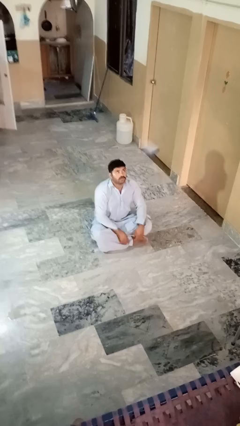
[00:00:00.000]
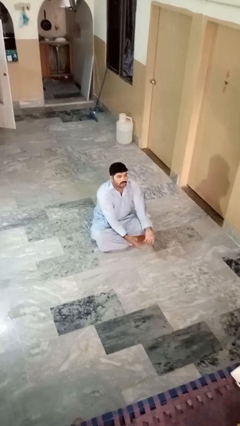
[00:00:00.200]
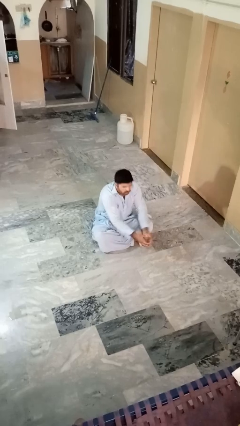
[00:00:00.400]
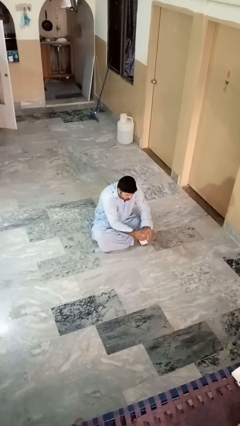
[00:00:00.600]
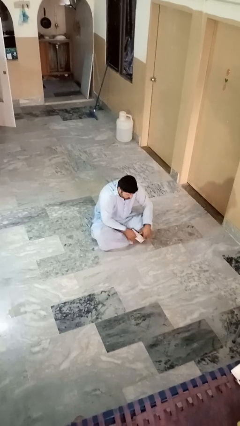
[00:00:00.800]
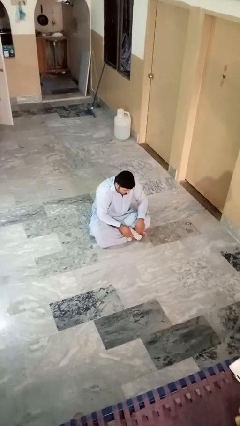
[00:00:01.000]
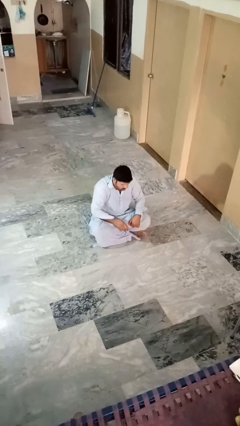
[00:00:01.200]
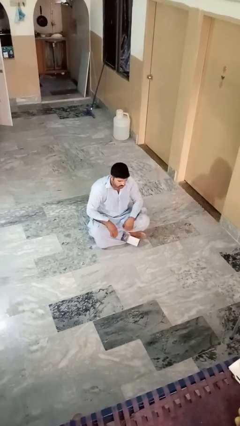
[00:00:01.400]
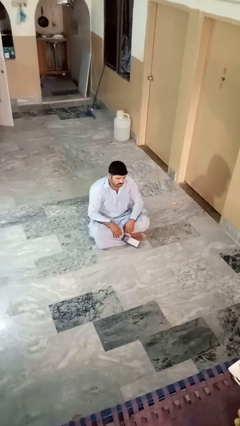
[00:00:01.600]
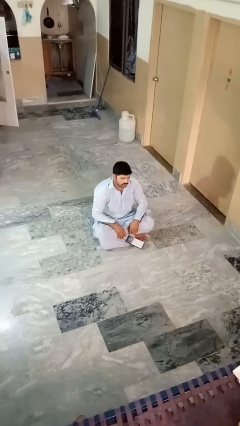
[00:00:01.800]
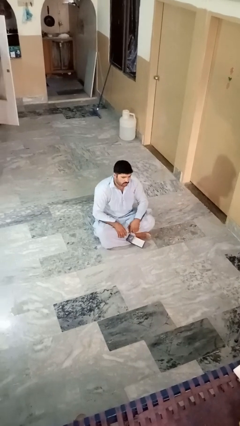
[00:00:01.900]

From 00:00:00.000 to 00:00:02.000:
person catches dropped object

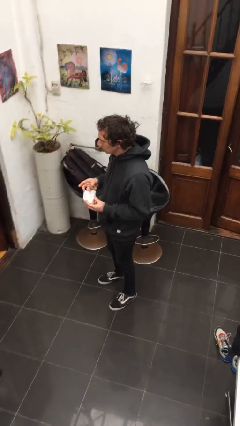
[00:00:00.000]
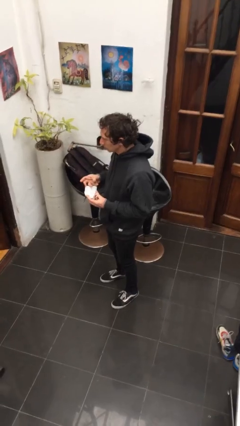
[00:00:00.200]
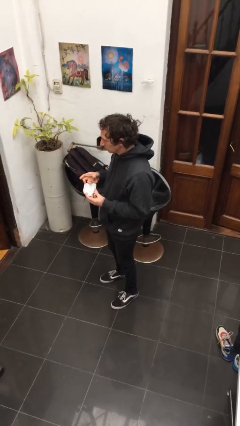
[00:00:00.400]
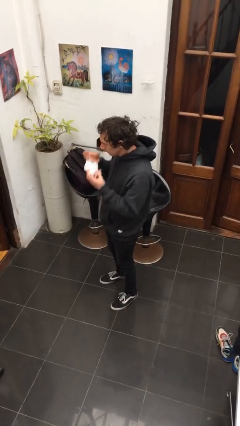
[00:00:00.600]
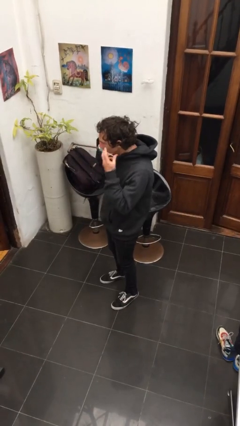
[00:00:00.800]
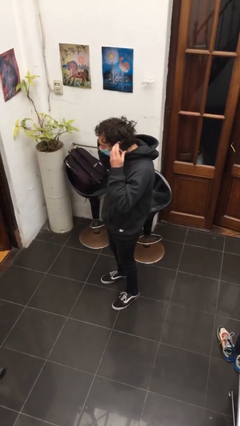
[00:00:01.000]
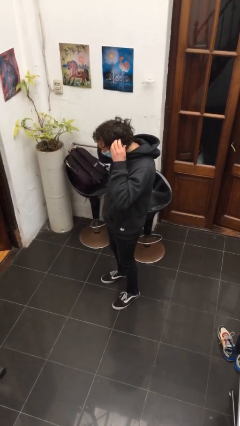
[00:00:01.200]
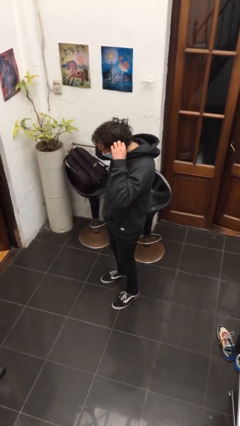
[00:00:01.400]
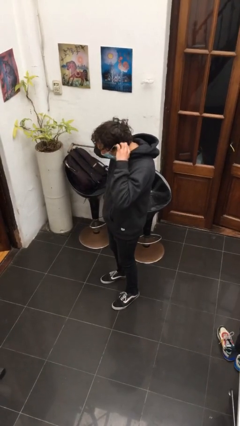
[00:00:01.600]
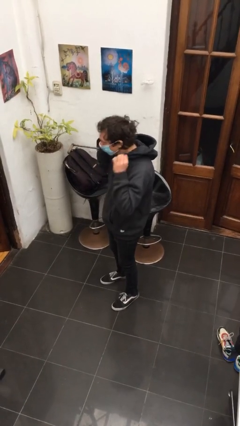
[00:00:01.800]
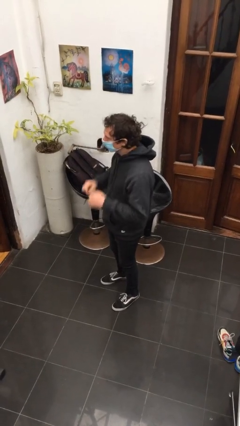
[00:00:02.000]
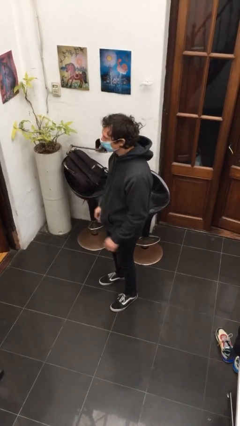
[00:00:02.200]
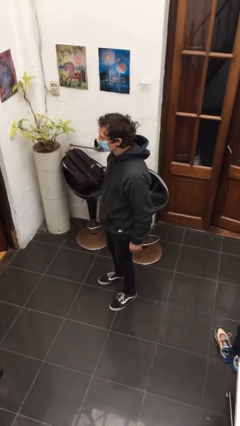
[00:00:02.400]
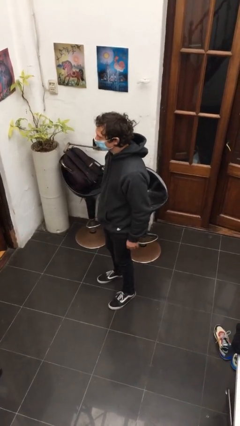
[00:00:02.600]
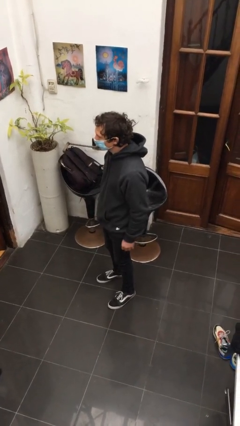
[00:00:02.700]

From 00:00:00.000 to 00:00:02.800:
person puts on facemask

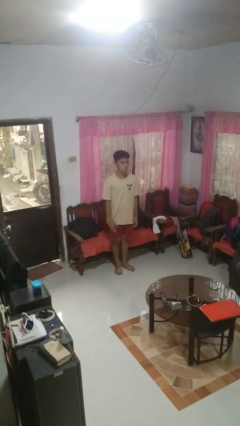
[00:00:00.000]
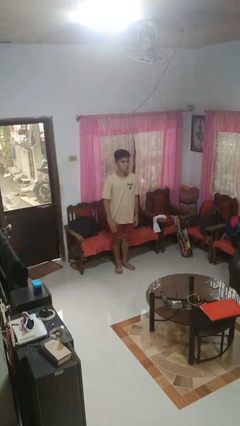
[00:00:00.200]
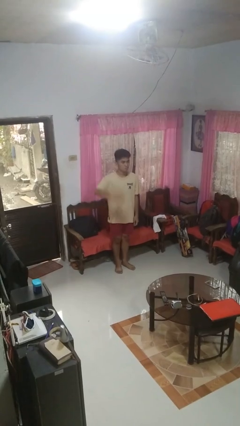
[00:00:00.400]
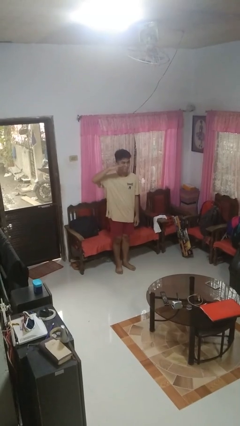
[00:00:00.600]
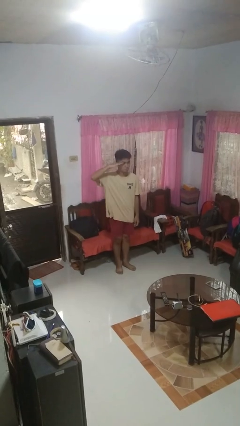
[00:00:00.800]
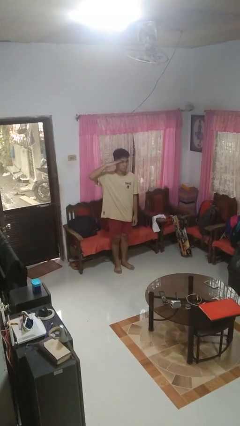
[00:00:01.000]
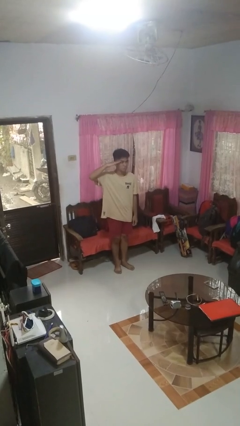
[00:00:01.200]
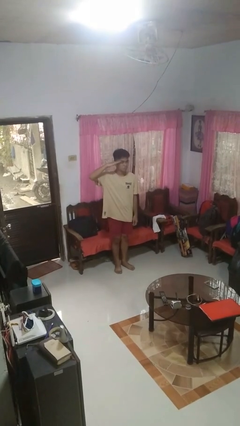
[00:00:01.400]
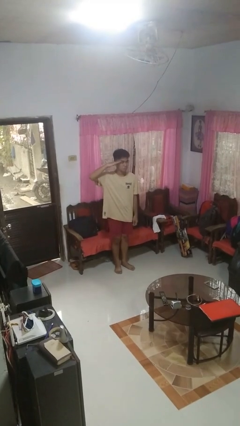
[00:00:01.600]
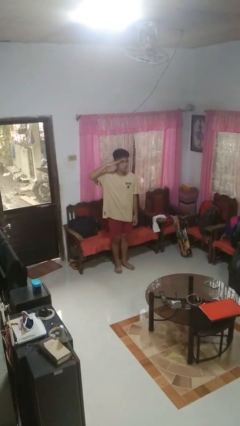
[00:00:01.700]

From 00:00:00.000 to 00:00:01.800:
person salutes

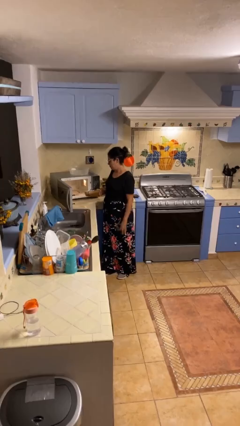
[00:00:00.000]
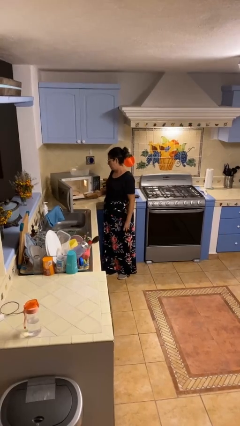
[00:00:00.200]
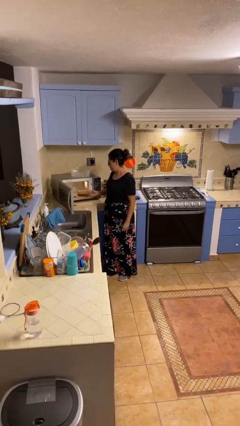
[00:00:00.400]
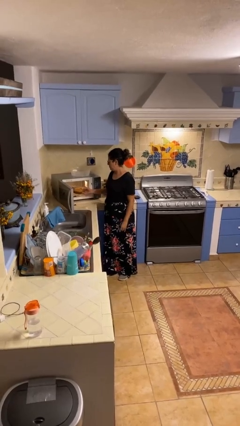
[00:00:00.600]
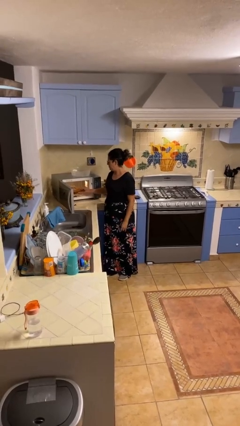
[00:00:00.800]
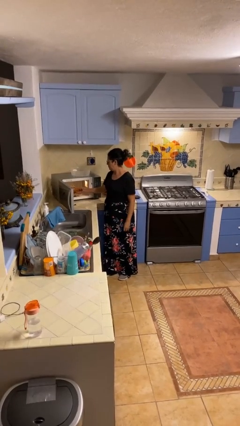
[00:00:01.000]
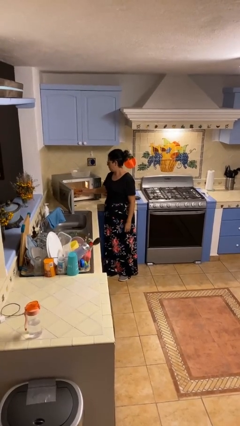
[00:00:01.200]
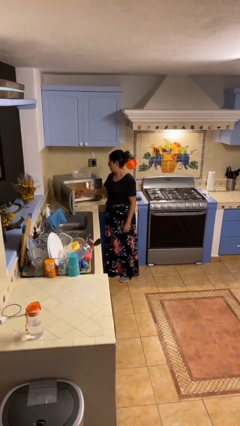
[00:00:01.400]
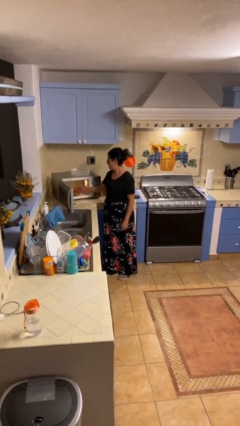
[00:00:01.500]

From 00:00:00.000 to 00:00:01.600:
person puts object into microwave

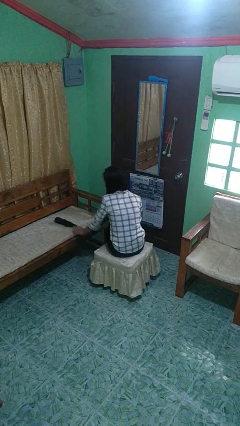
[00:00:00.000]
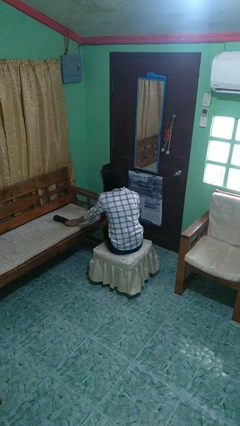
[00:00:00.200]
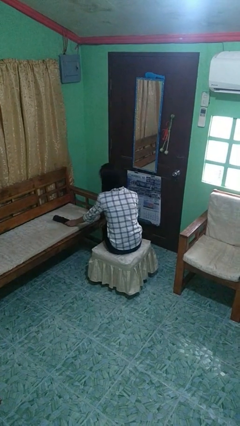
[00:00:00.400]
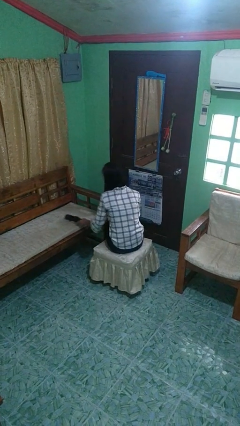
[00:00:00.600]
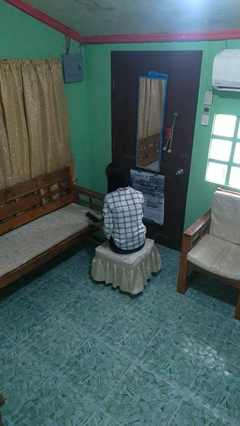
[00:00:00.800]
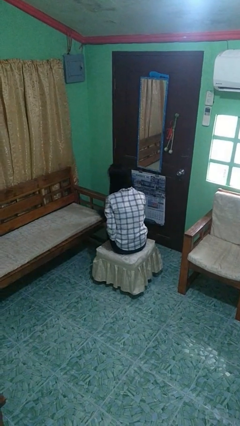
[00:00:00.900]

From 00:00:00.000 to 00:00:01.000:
person picks up object from couch

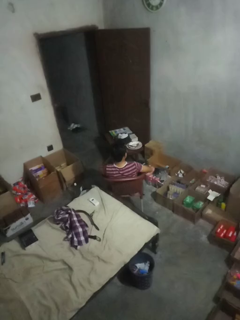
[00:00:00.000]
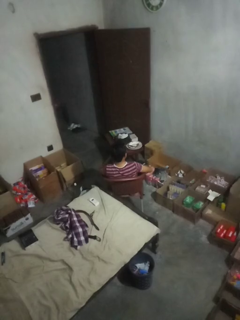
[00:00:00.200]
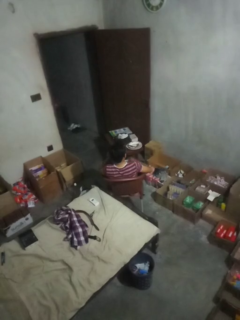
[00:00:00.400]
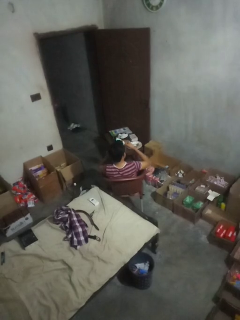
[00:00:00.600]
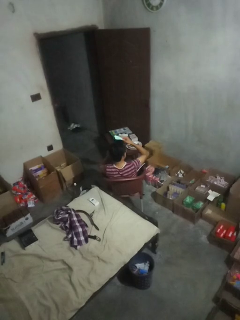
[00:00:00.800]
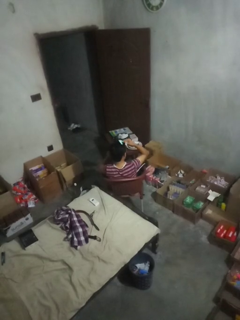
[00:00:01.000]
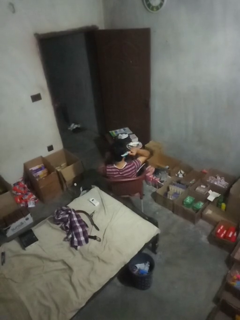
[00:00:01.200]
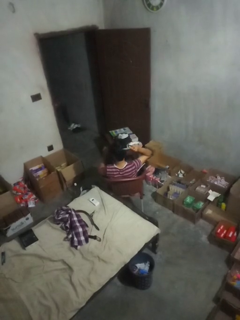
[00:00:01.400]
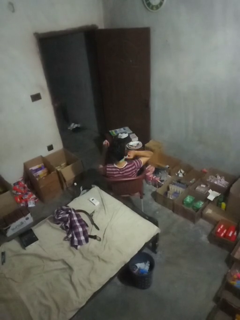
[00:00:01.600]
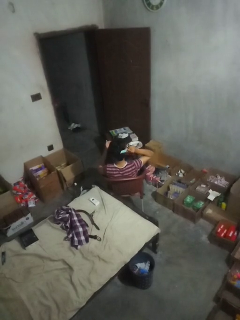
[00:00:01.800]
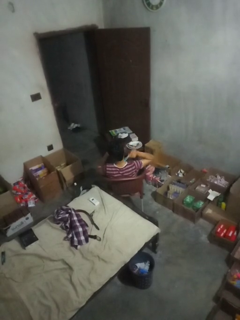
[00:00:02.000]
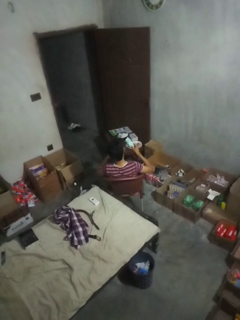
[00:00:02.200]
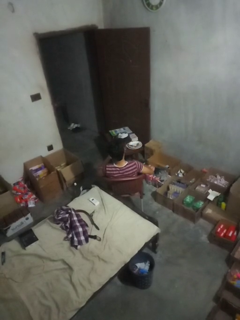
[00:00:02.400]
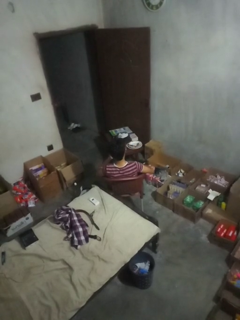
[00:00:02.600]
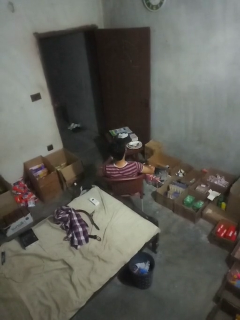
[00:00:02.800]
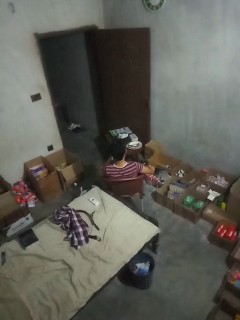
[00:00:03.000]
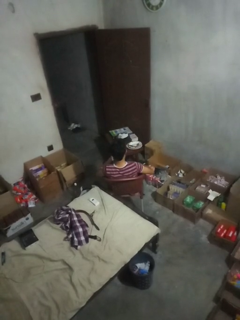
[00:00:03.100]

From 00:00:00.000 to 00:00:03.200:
person brushes hair

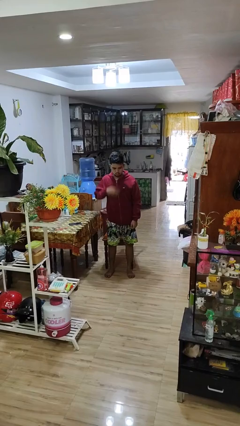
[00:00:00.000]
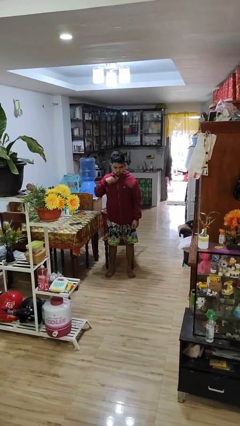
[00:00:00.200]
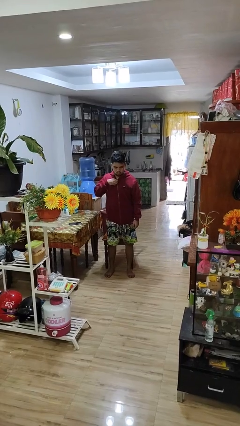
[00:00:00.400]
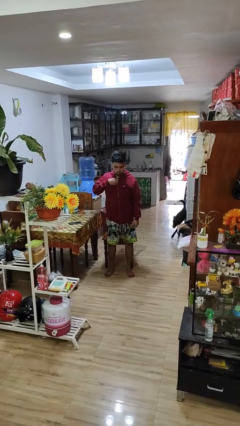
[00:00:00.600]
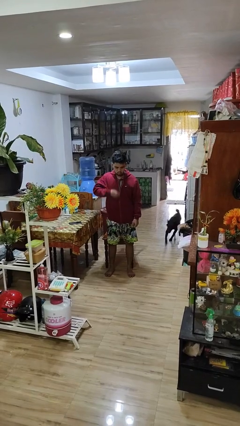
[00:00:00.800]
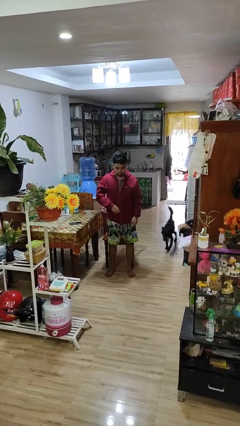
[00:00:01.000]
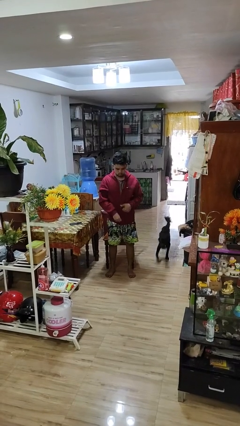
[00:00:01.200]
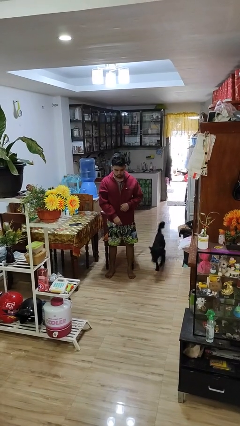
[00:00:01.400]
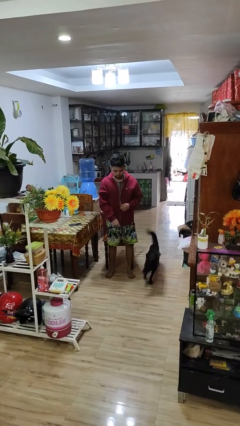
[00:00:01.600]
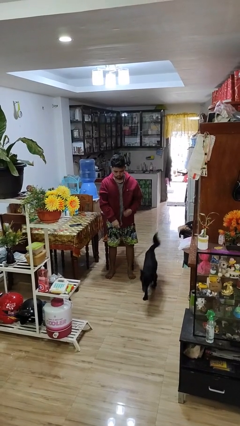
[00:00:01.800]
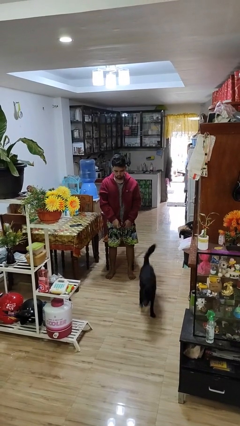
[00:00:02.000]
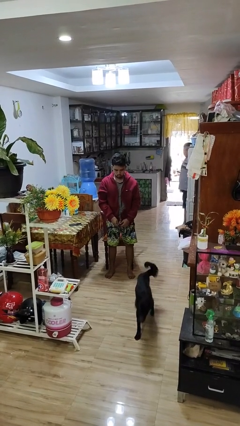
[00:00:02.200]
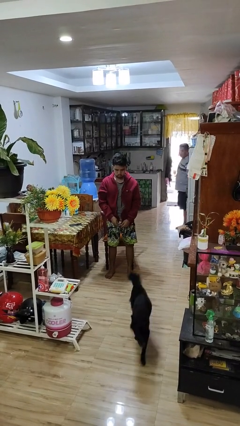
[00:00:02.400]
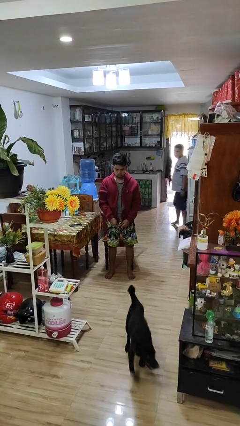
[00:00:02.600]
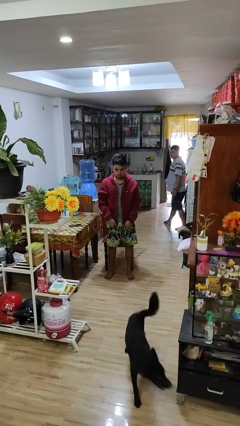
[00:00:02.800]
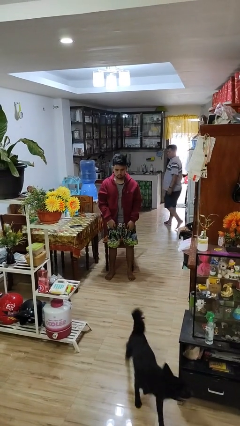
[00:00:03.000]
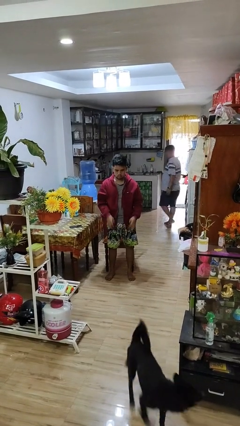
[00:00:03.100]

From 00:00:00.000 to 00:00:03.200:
person unzips jacket

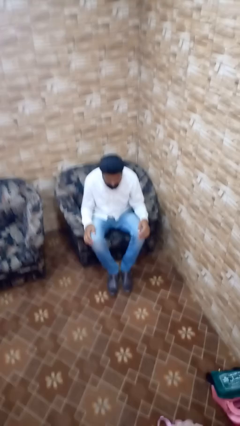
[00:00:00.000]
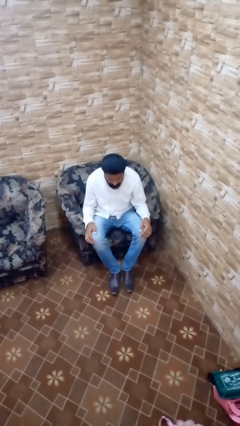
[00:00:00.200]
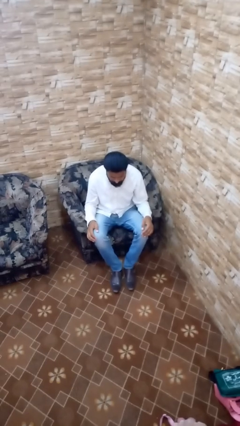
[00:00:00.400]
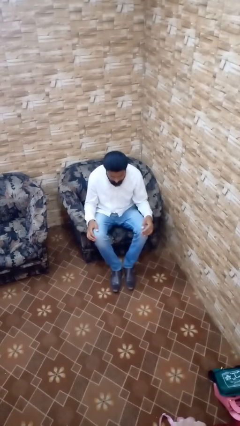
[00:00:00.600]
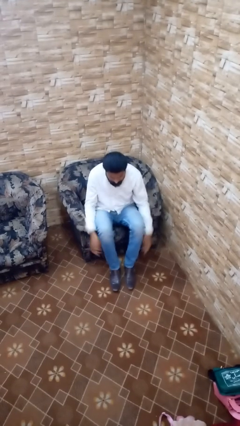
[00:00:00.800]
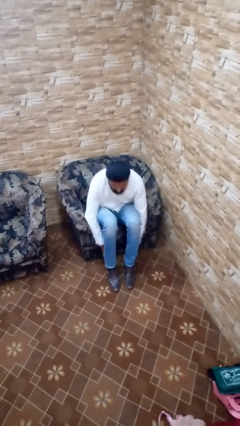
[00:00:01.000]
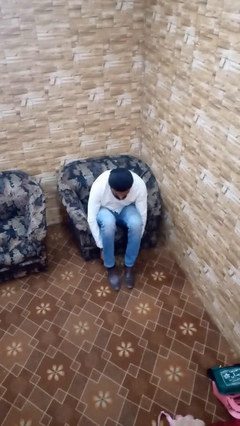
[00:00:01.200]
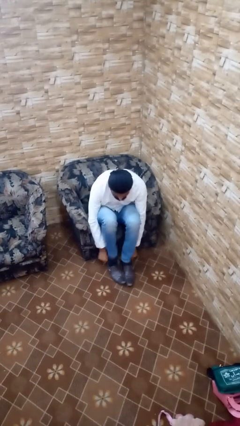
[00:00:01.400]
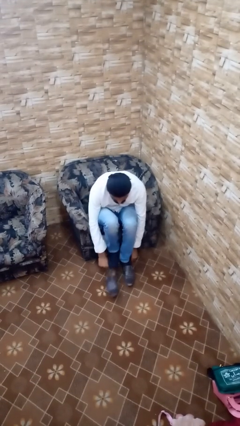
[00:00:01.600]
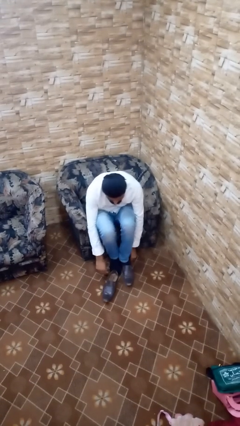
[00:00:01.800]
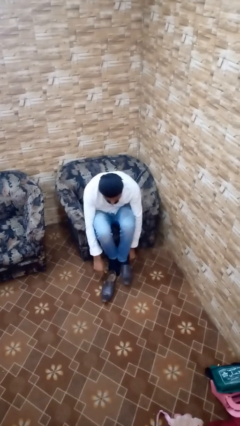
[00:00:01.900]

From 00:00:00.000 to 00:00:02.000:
person takes off shoes
